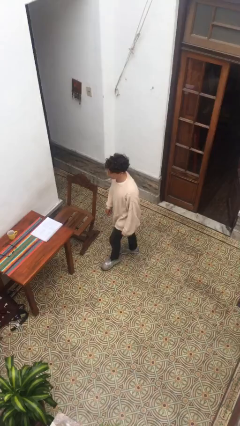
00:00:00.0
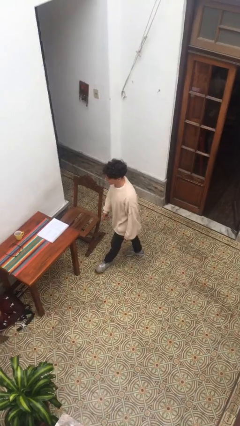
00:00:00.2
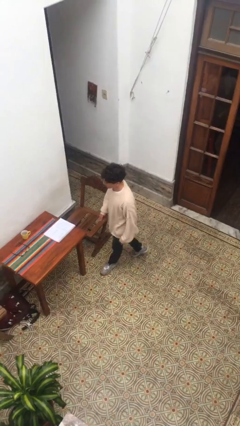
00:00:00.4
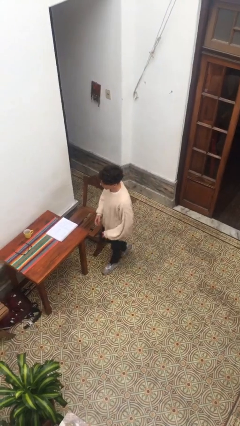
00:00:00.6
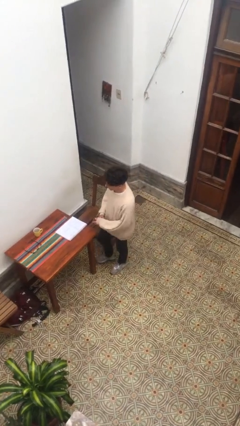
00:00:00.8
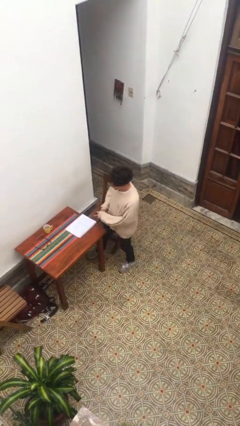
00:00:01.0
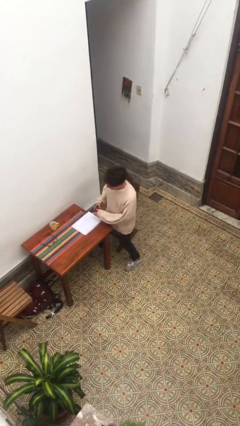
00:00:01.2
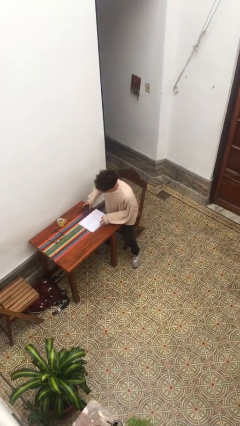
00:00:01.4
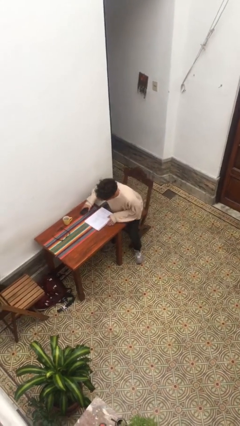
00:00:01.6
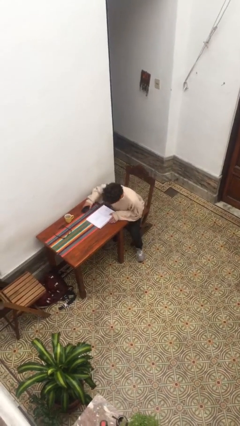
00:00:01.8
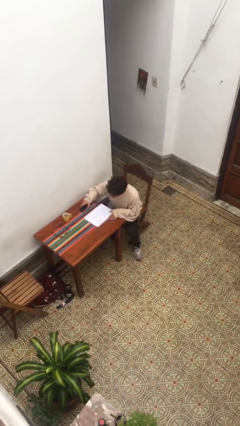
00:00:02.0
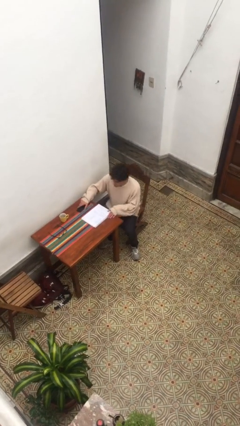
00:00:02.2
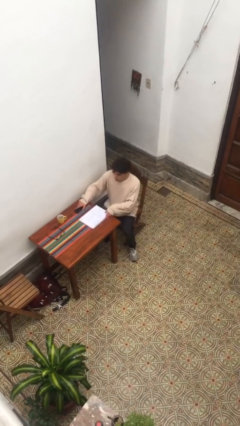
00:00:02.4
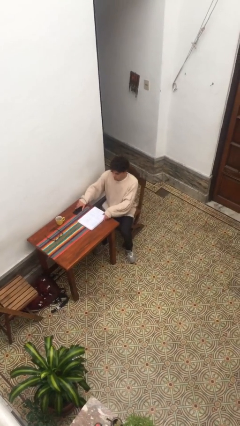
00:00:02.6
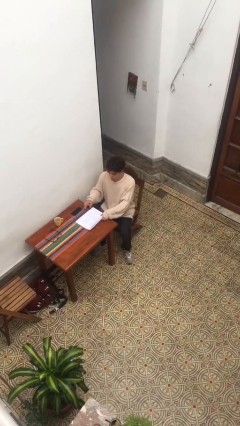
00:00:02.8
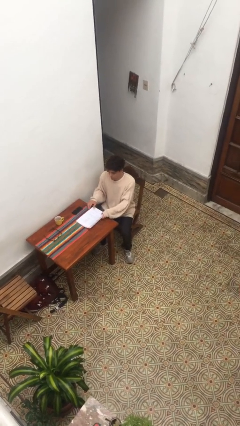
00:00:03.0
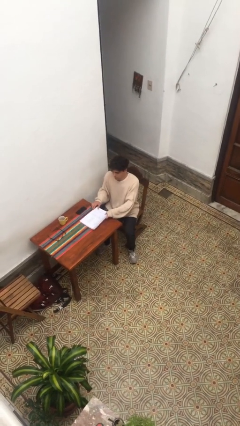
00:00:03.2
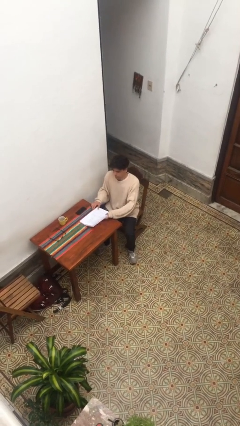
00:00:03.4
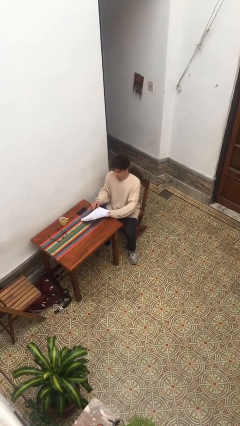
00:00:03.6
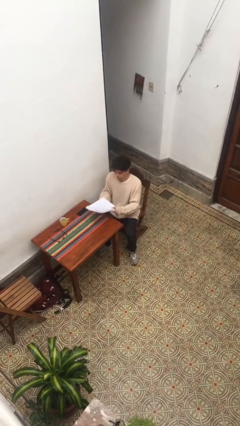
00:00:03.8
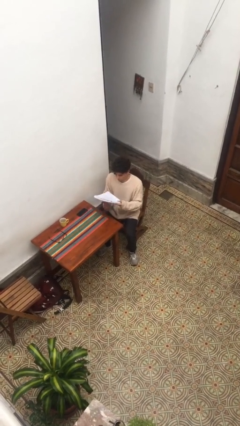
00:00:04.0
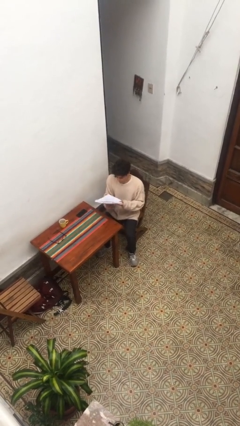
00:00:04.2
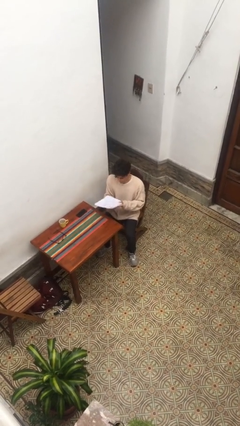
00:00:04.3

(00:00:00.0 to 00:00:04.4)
person sits down

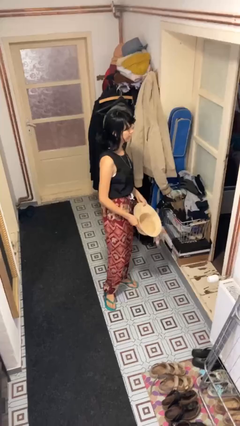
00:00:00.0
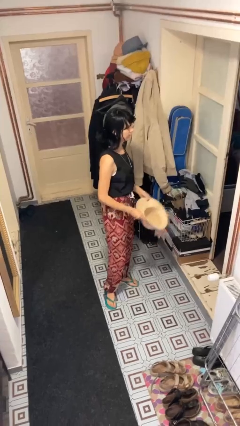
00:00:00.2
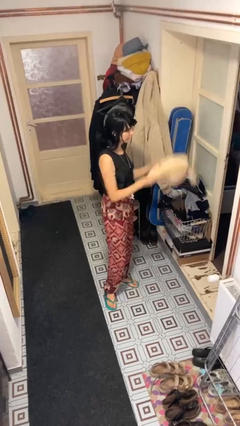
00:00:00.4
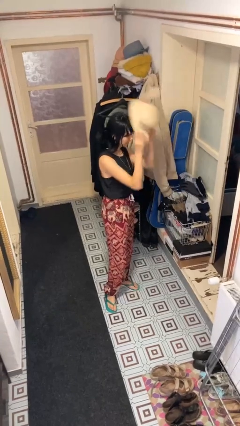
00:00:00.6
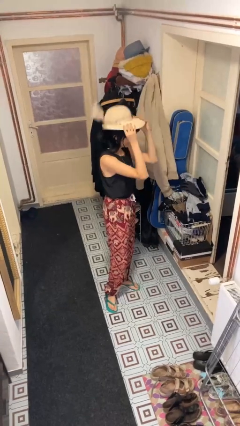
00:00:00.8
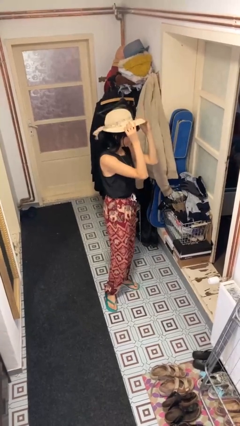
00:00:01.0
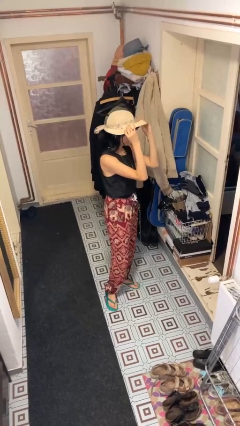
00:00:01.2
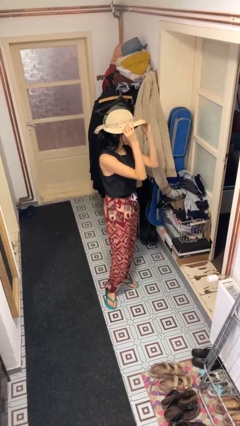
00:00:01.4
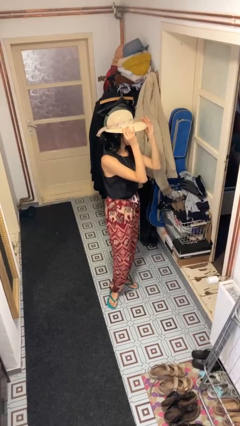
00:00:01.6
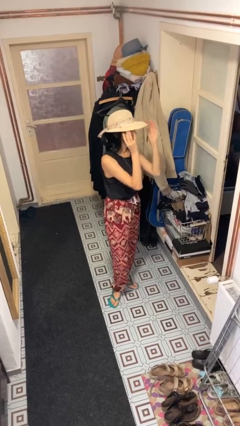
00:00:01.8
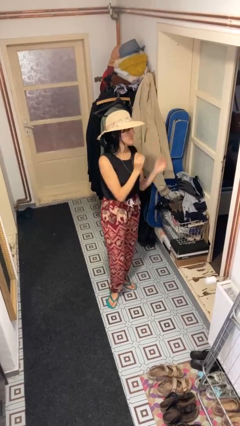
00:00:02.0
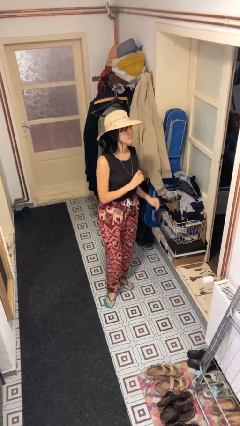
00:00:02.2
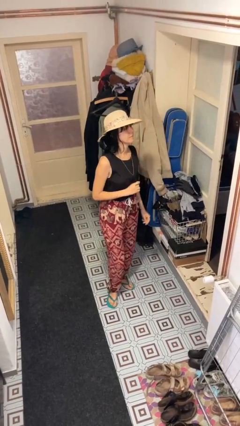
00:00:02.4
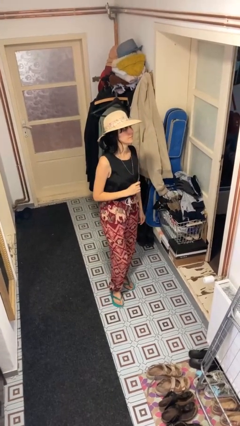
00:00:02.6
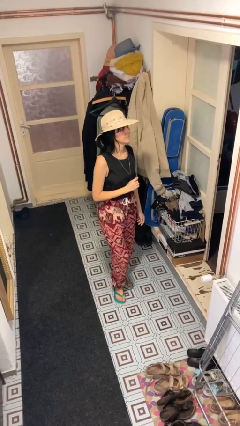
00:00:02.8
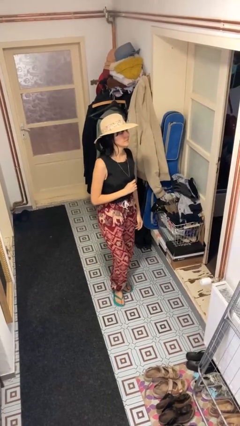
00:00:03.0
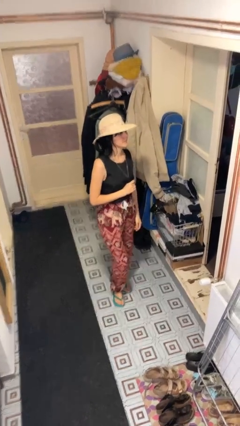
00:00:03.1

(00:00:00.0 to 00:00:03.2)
person puts on hat

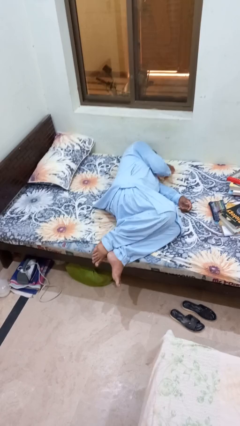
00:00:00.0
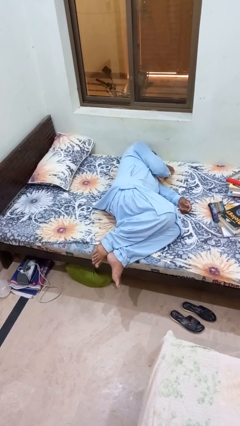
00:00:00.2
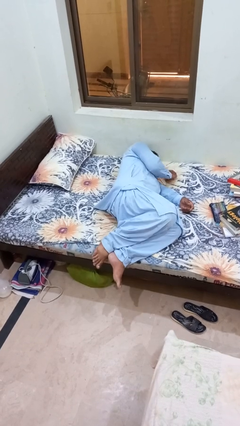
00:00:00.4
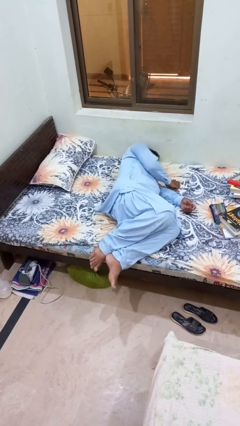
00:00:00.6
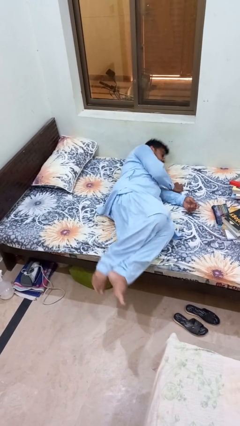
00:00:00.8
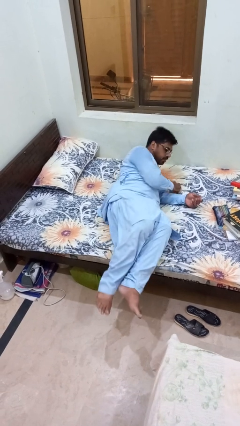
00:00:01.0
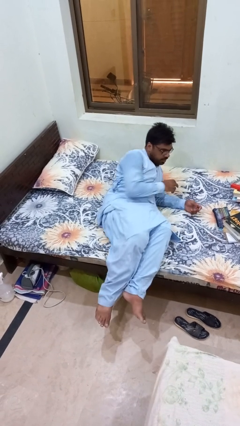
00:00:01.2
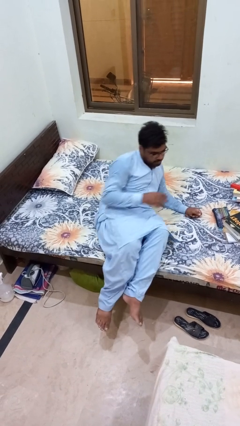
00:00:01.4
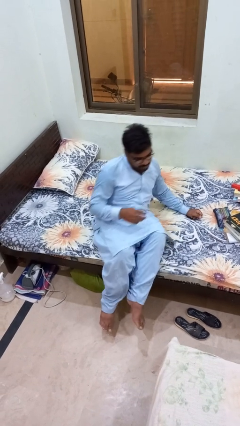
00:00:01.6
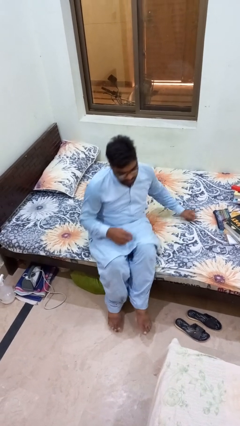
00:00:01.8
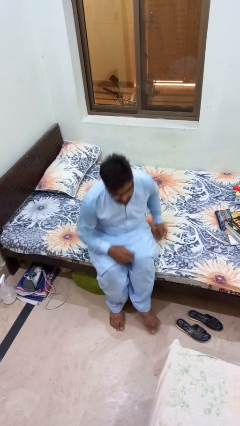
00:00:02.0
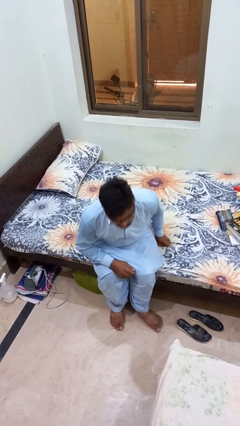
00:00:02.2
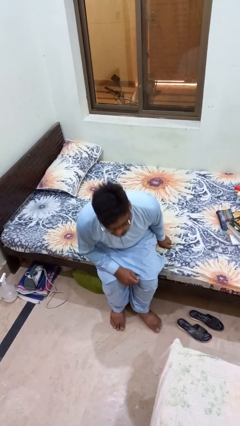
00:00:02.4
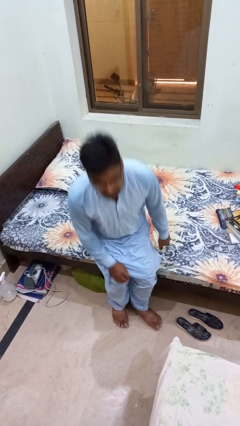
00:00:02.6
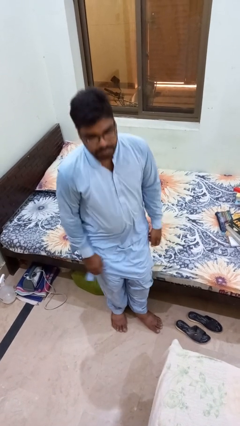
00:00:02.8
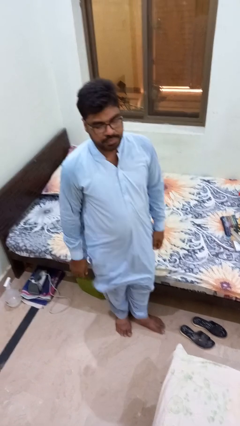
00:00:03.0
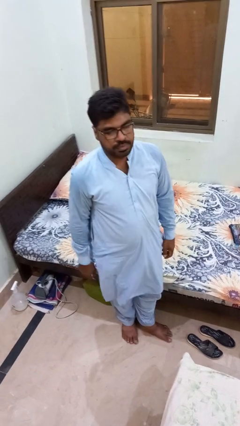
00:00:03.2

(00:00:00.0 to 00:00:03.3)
person stands up

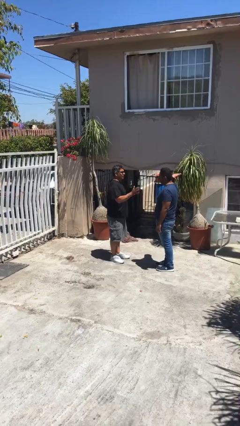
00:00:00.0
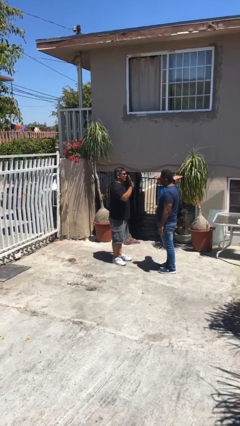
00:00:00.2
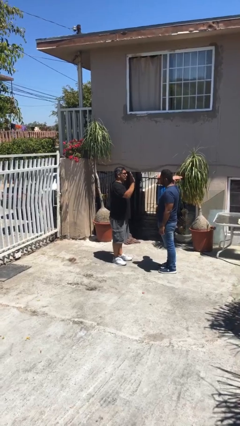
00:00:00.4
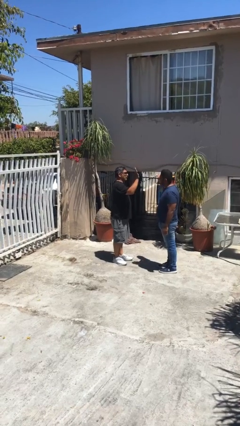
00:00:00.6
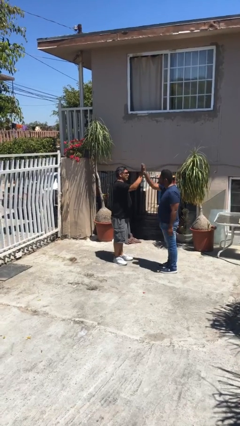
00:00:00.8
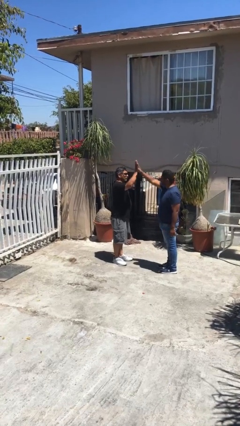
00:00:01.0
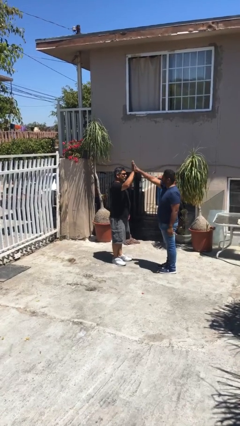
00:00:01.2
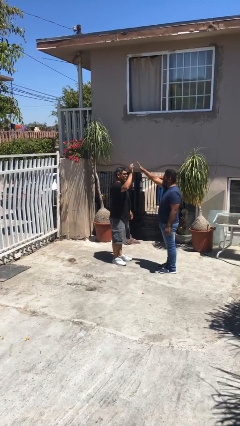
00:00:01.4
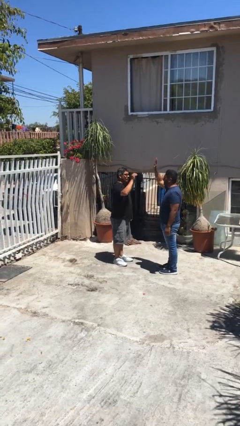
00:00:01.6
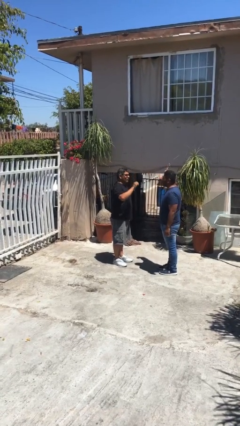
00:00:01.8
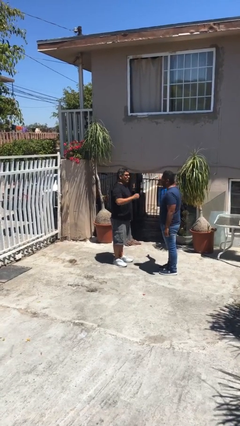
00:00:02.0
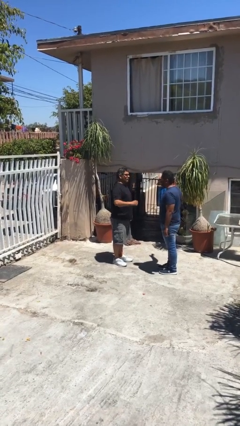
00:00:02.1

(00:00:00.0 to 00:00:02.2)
person highfives hand

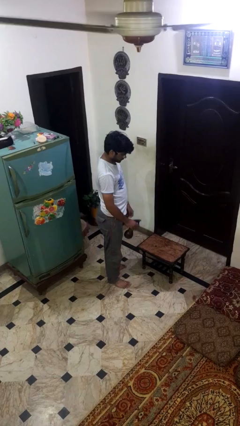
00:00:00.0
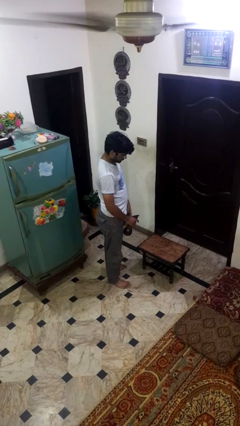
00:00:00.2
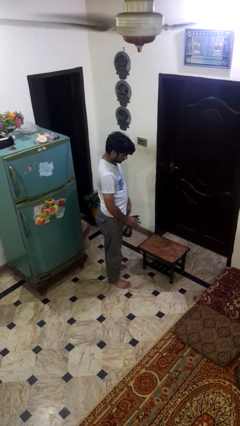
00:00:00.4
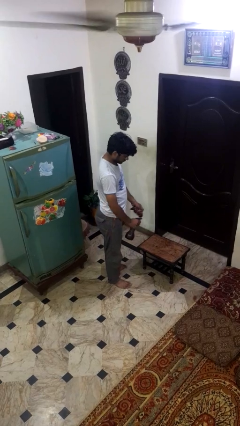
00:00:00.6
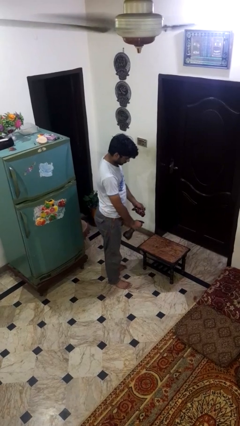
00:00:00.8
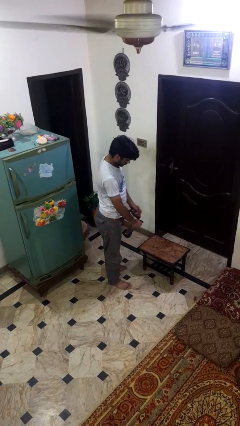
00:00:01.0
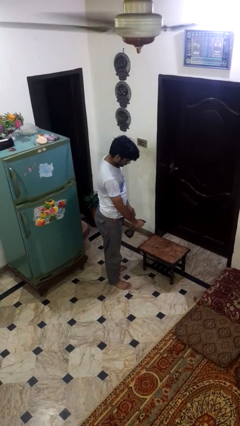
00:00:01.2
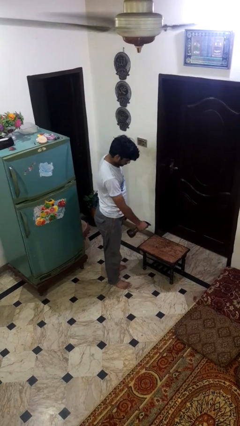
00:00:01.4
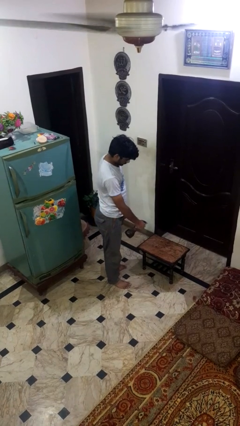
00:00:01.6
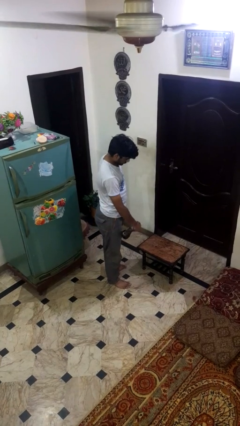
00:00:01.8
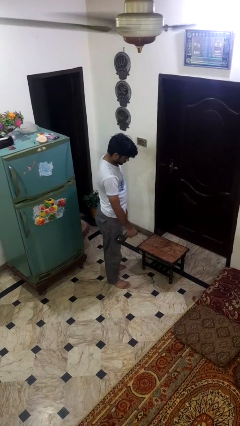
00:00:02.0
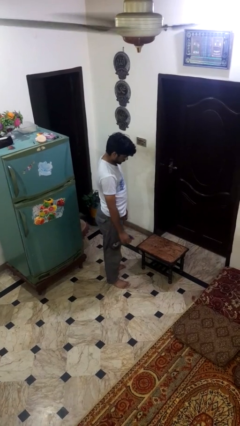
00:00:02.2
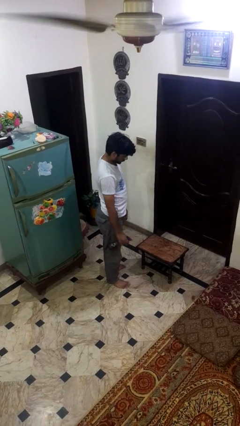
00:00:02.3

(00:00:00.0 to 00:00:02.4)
person sprays from bottle

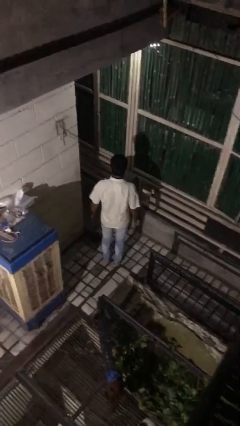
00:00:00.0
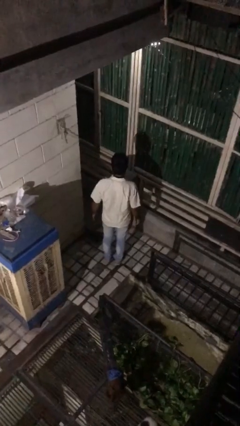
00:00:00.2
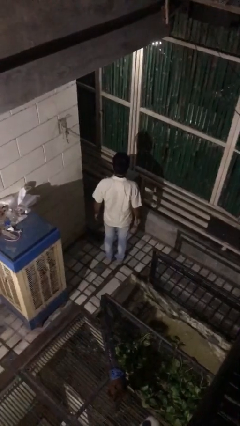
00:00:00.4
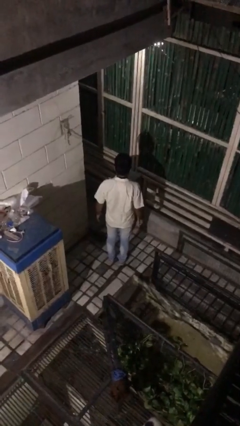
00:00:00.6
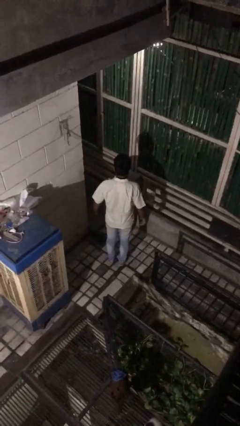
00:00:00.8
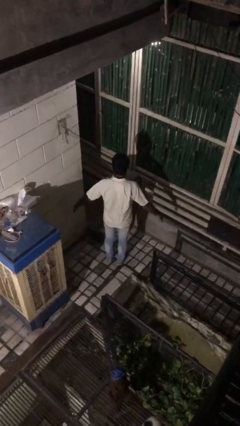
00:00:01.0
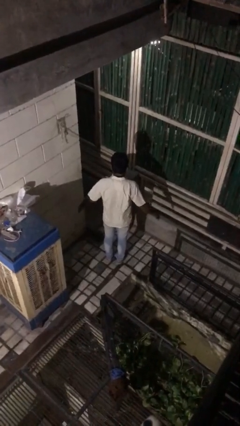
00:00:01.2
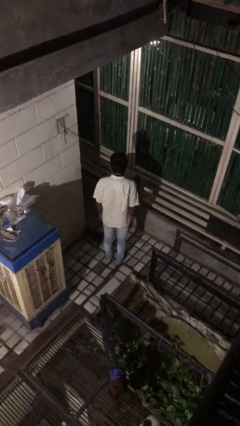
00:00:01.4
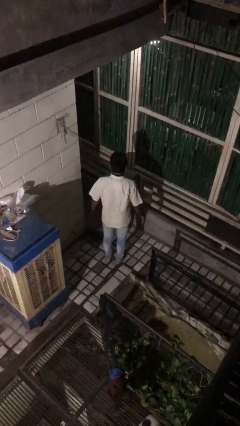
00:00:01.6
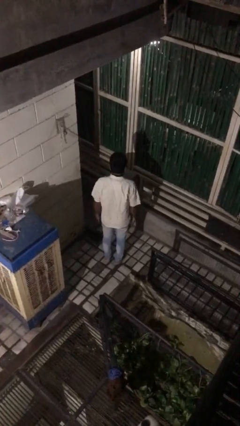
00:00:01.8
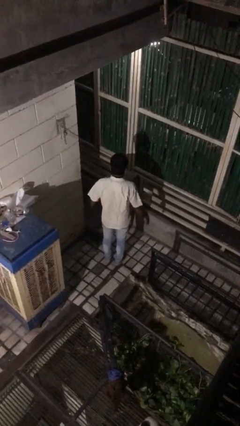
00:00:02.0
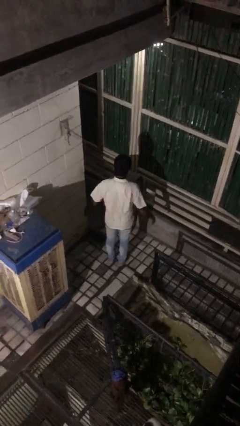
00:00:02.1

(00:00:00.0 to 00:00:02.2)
person slaps hands on thighs
